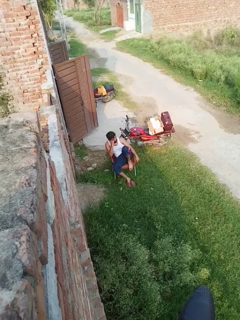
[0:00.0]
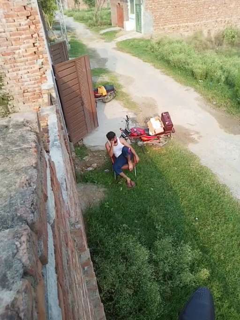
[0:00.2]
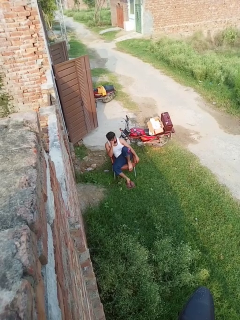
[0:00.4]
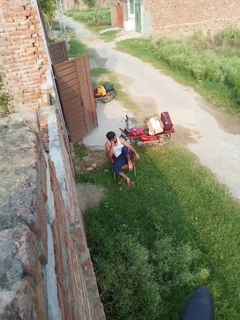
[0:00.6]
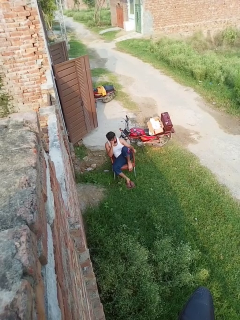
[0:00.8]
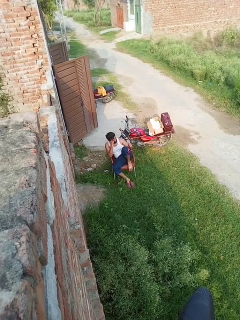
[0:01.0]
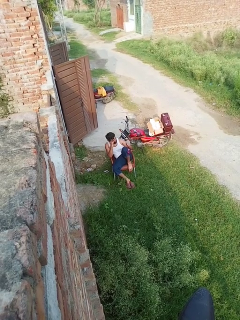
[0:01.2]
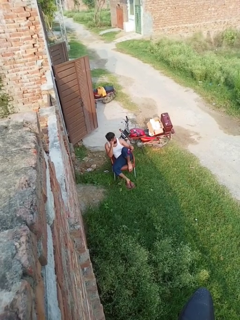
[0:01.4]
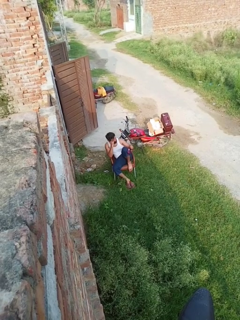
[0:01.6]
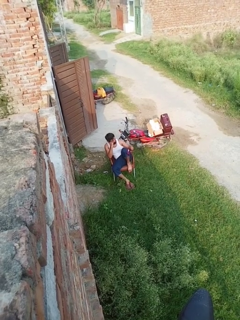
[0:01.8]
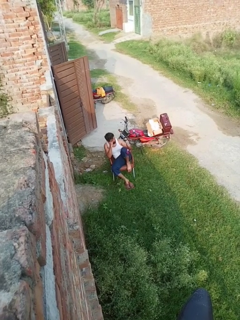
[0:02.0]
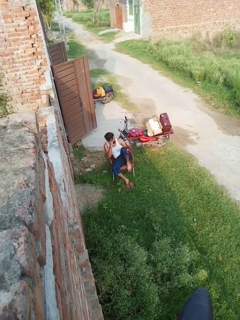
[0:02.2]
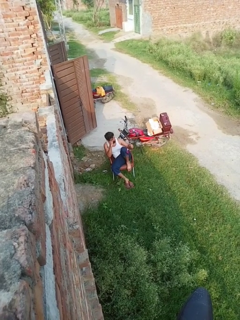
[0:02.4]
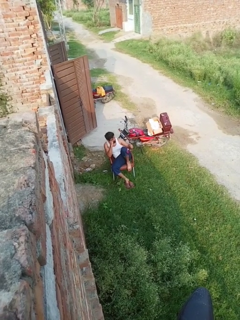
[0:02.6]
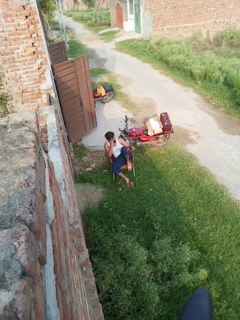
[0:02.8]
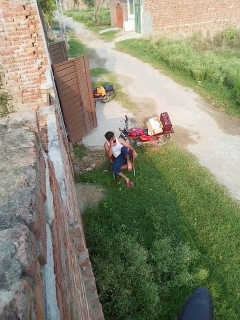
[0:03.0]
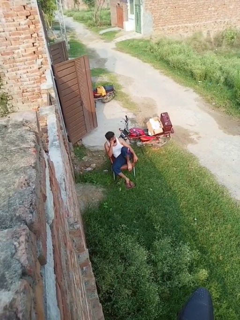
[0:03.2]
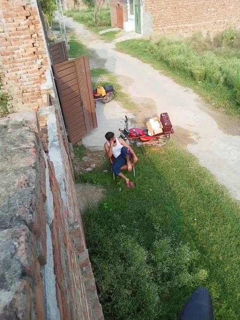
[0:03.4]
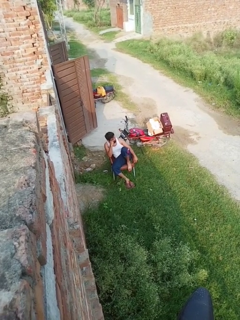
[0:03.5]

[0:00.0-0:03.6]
person gestures thumbs up

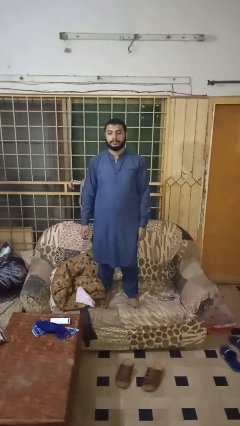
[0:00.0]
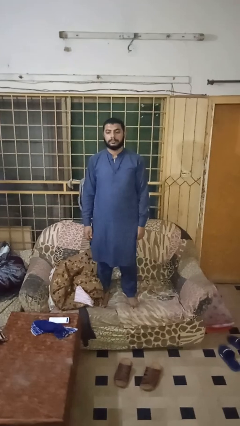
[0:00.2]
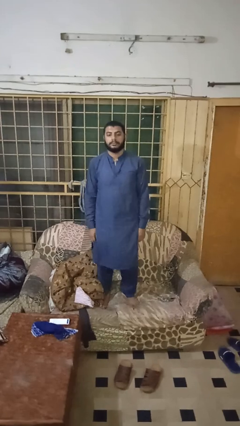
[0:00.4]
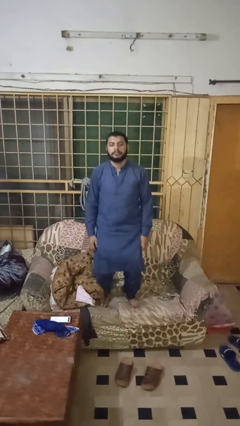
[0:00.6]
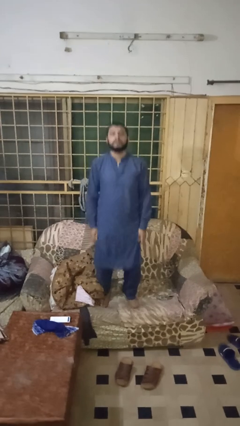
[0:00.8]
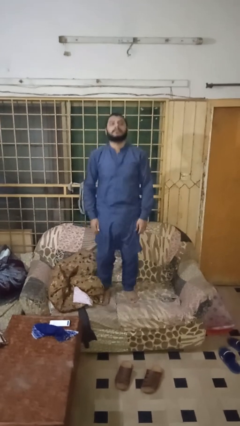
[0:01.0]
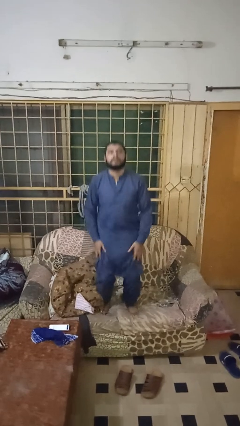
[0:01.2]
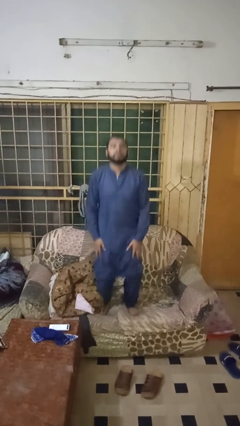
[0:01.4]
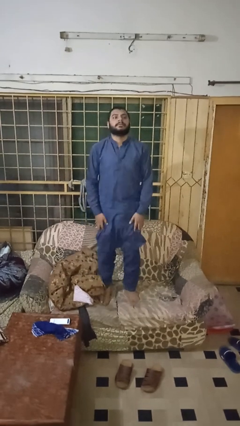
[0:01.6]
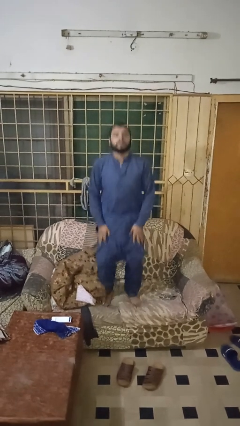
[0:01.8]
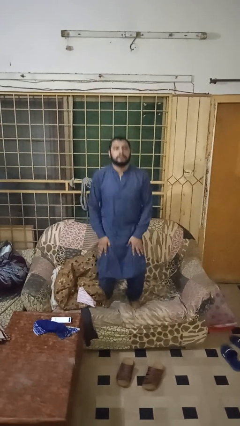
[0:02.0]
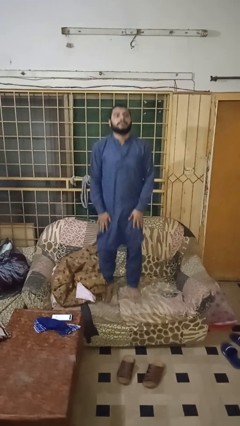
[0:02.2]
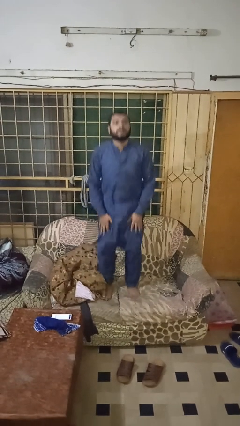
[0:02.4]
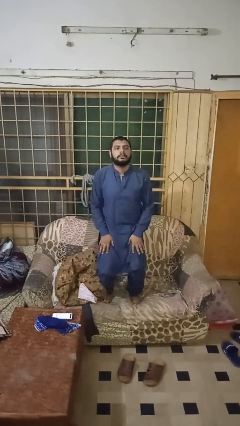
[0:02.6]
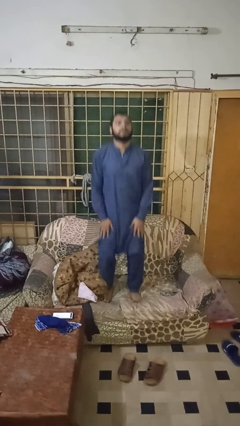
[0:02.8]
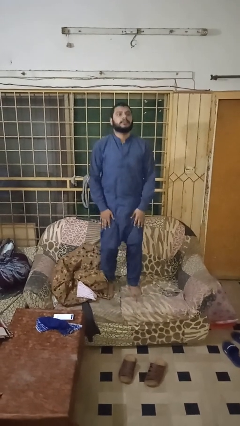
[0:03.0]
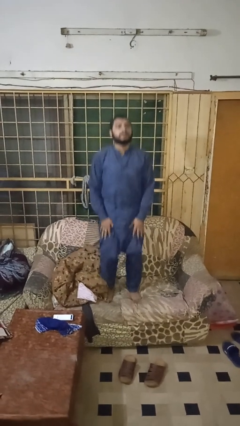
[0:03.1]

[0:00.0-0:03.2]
person jumps on couch

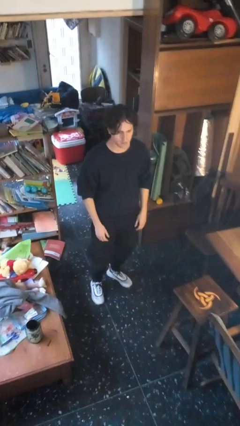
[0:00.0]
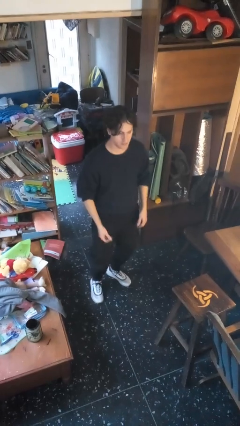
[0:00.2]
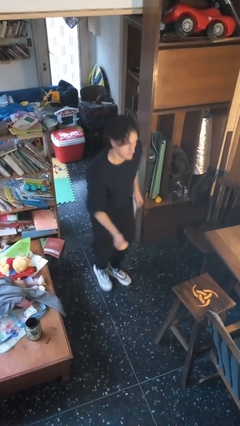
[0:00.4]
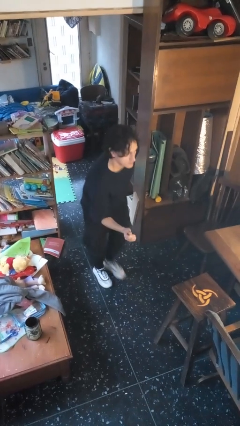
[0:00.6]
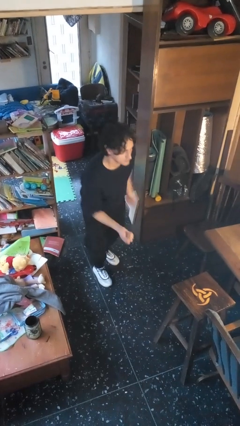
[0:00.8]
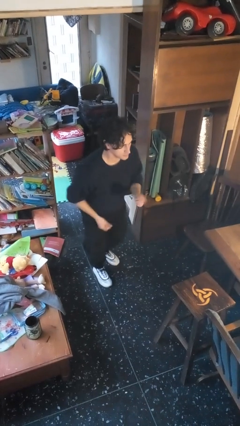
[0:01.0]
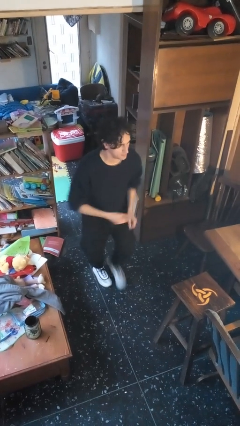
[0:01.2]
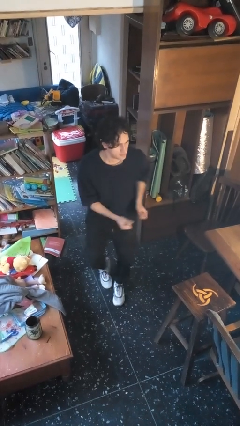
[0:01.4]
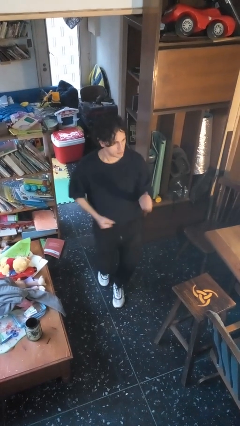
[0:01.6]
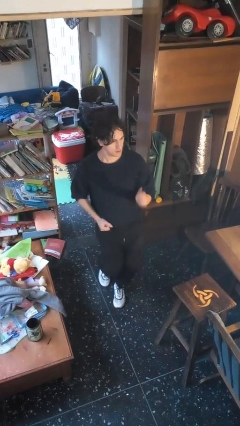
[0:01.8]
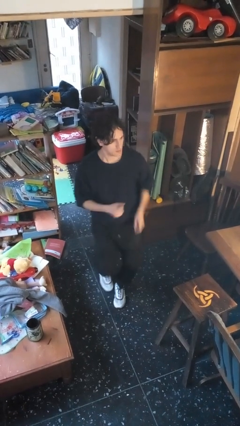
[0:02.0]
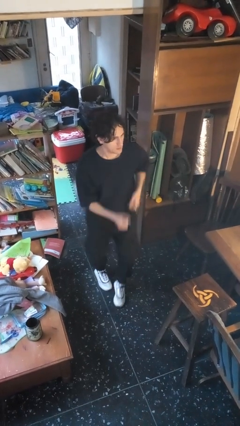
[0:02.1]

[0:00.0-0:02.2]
person dances in place

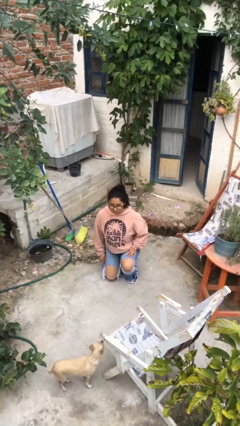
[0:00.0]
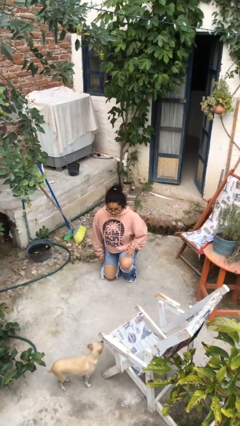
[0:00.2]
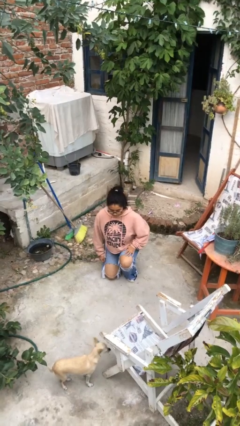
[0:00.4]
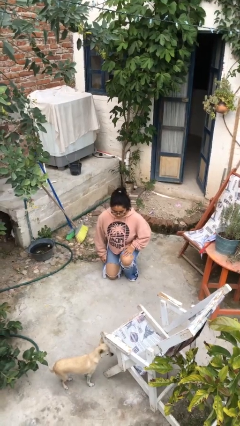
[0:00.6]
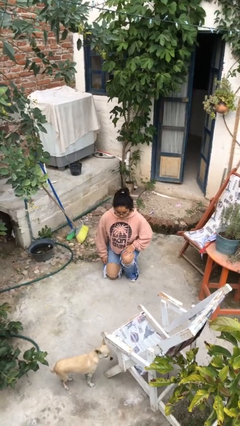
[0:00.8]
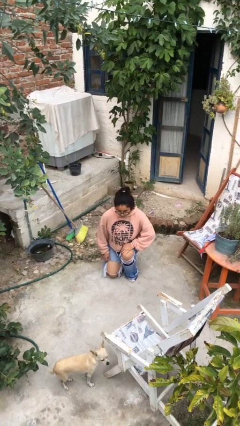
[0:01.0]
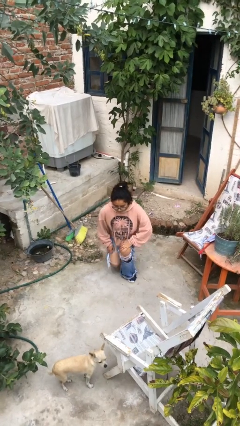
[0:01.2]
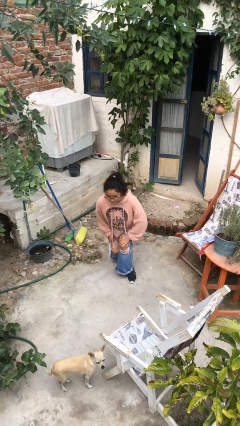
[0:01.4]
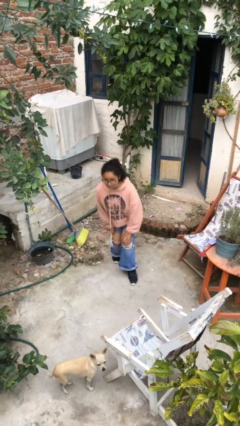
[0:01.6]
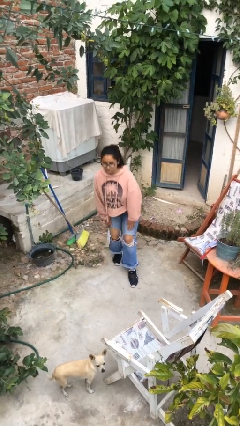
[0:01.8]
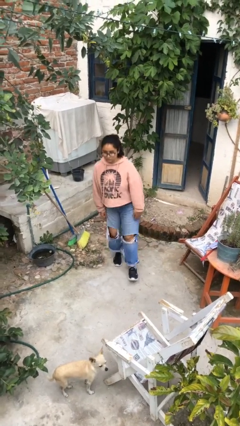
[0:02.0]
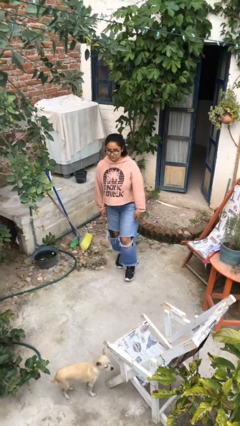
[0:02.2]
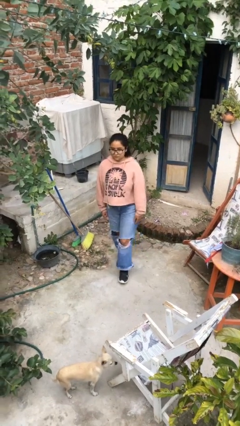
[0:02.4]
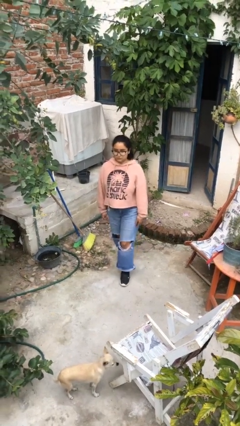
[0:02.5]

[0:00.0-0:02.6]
person stands up from floor

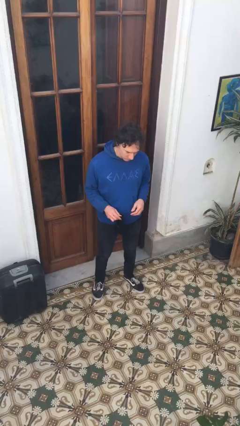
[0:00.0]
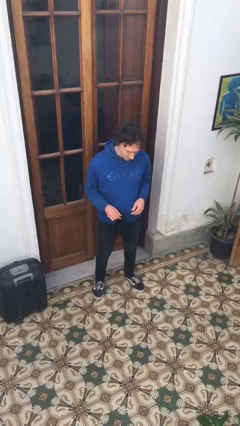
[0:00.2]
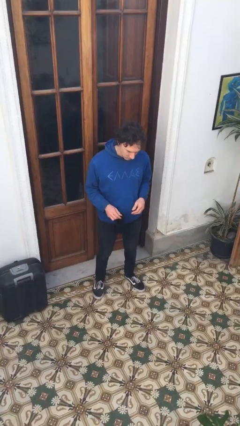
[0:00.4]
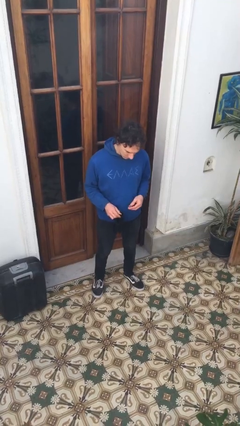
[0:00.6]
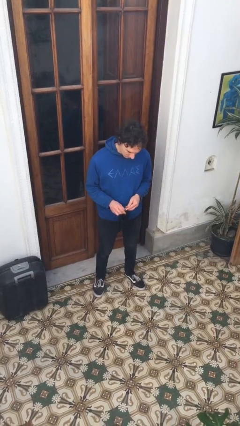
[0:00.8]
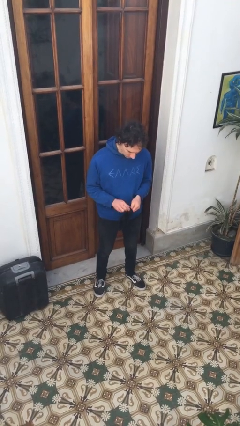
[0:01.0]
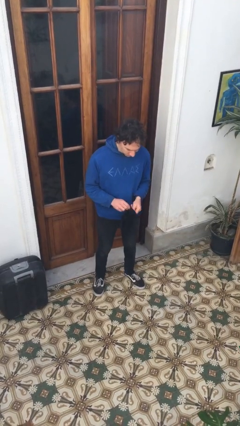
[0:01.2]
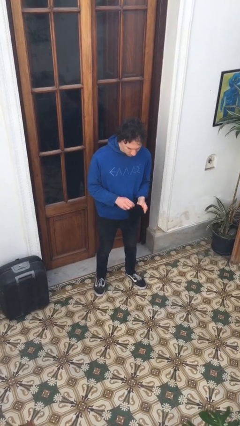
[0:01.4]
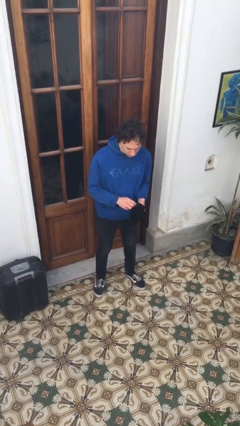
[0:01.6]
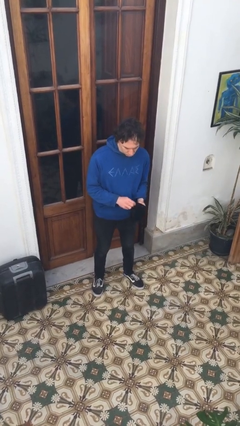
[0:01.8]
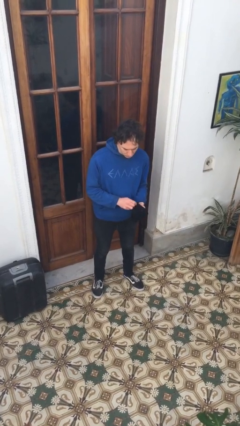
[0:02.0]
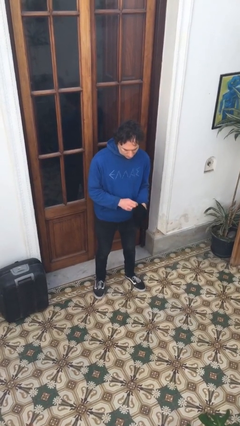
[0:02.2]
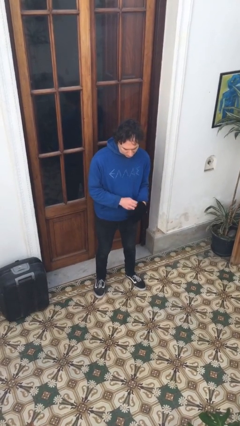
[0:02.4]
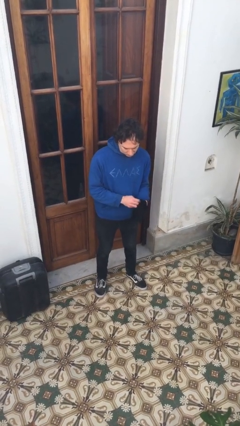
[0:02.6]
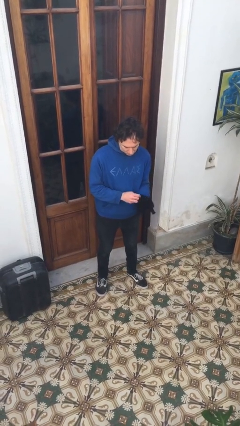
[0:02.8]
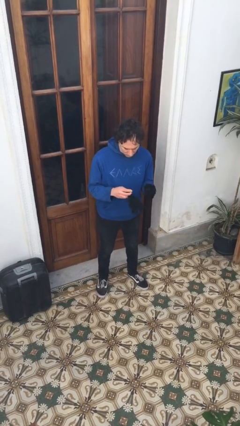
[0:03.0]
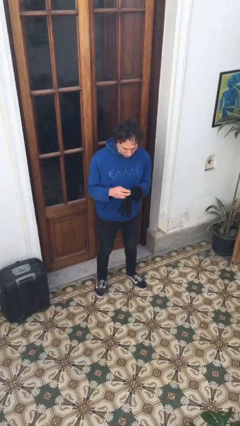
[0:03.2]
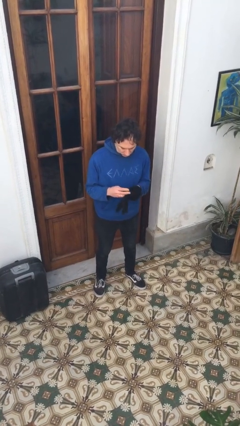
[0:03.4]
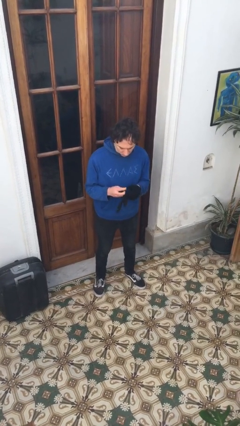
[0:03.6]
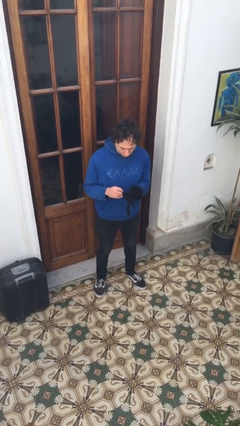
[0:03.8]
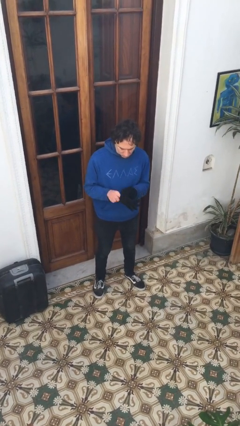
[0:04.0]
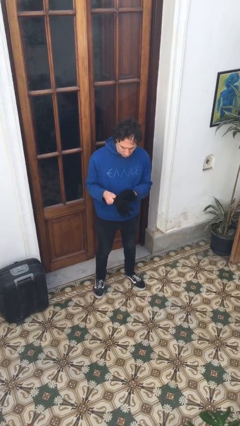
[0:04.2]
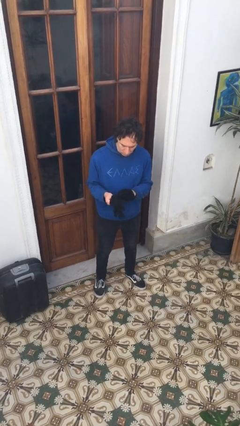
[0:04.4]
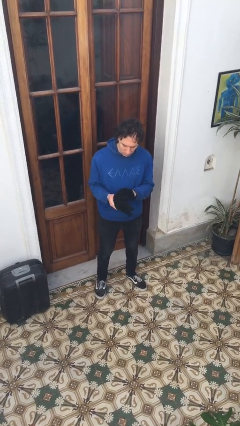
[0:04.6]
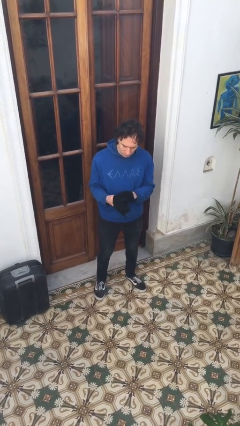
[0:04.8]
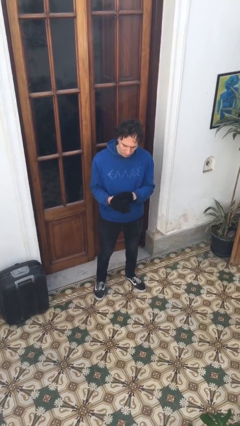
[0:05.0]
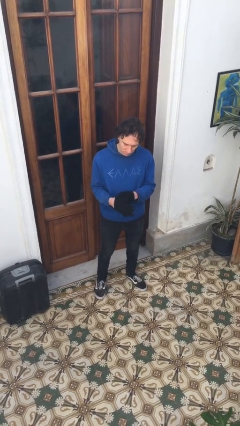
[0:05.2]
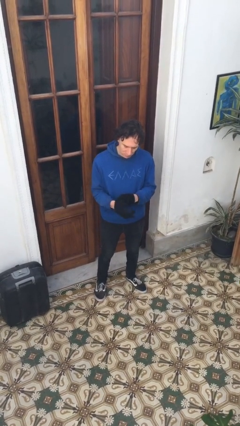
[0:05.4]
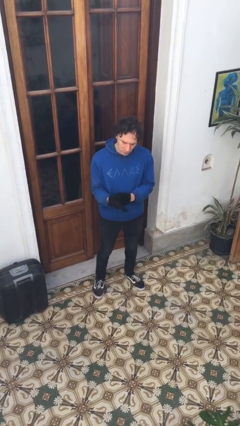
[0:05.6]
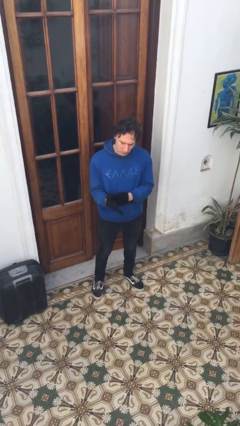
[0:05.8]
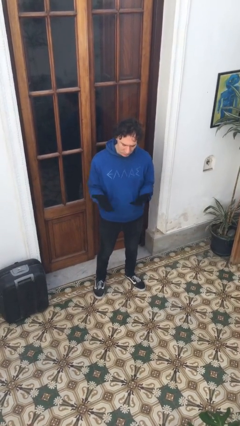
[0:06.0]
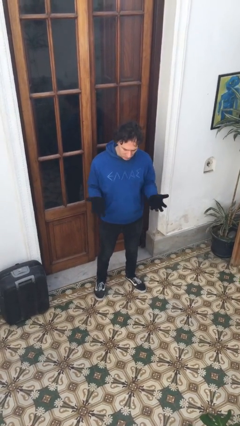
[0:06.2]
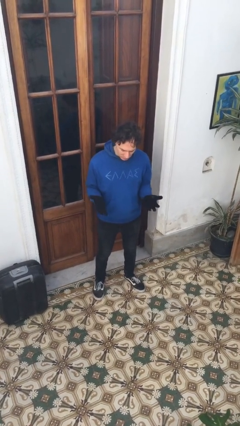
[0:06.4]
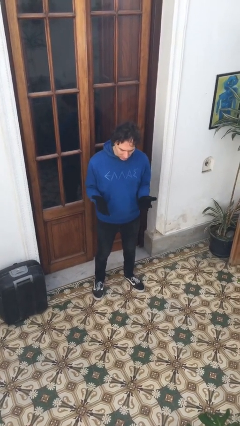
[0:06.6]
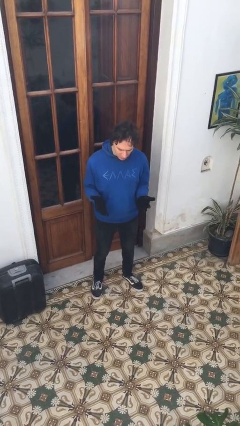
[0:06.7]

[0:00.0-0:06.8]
person puts on gloves
